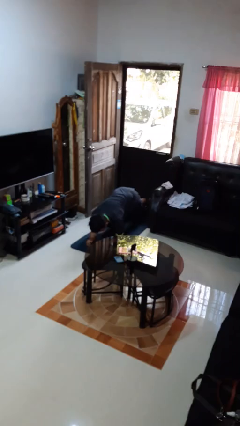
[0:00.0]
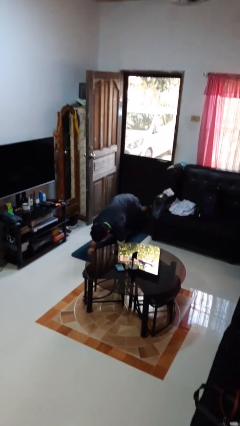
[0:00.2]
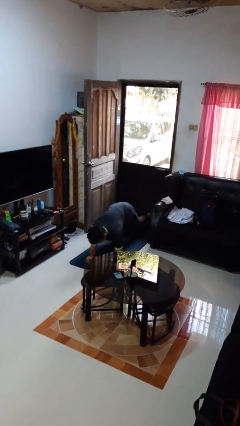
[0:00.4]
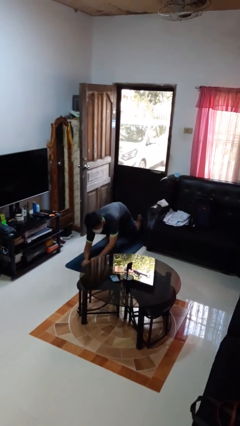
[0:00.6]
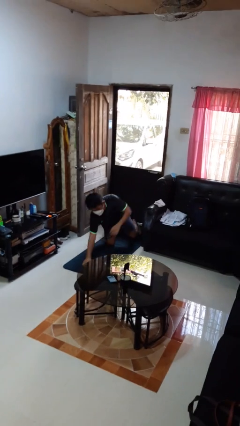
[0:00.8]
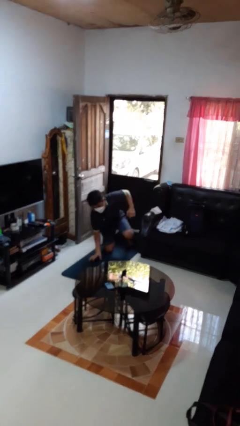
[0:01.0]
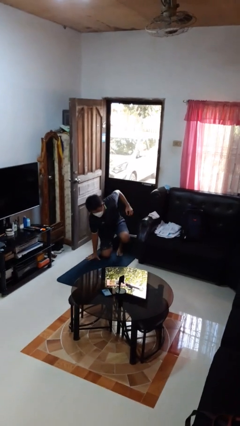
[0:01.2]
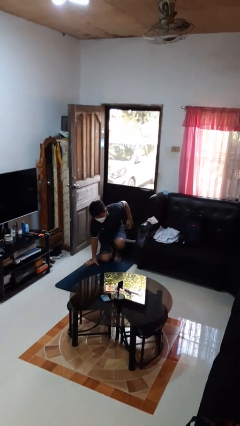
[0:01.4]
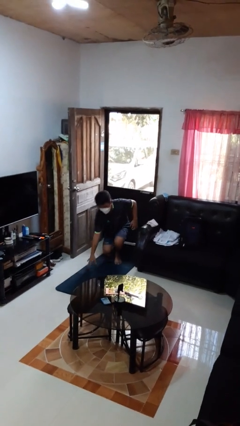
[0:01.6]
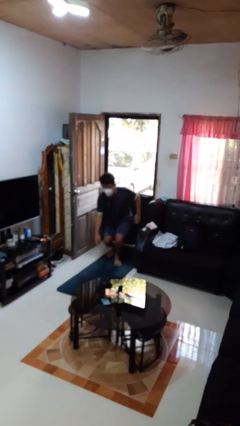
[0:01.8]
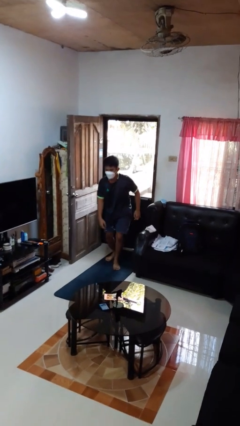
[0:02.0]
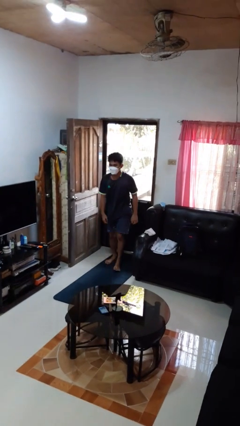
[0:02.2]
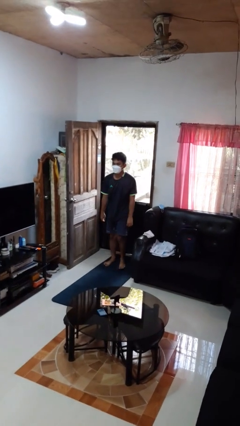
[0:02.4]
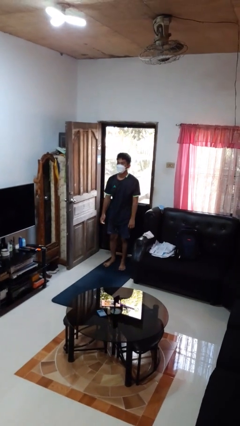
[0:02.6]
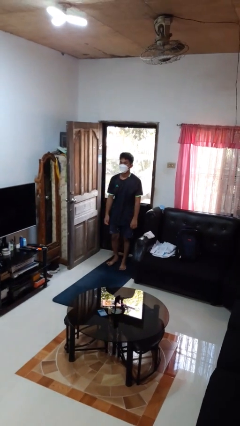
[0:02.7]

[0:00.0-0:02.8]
person stands up from floor

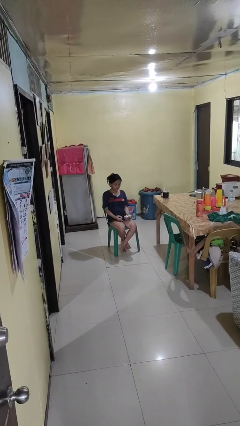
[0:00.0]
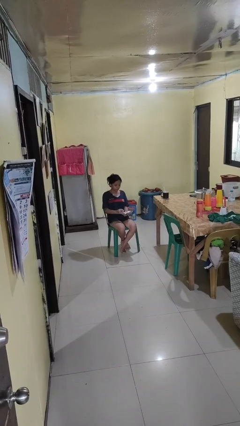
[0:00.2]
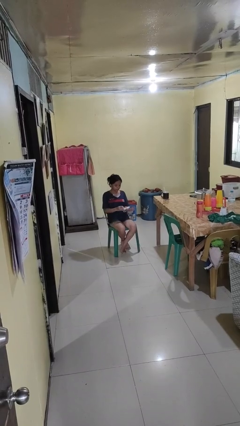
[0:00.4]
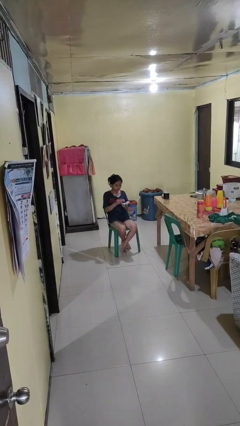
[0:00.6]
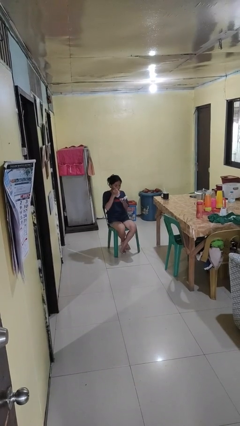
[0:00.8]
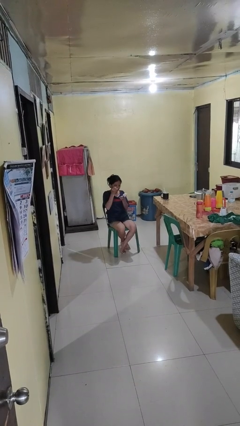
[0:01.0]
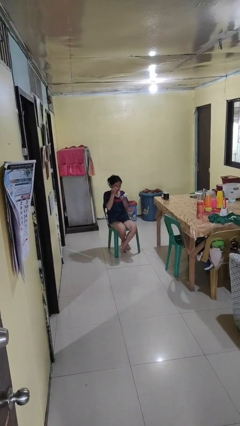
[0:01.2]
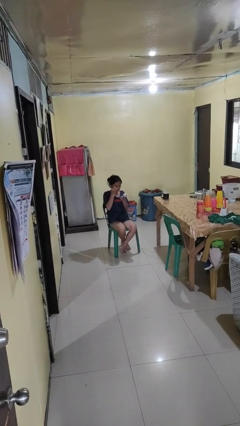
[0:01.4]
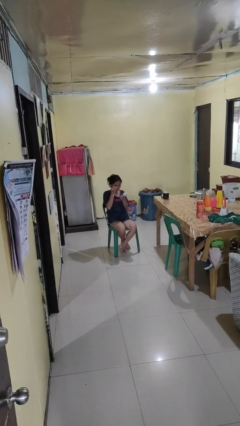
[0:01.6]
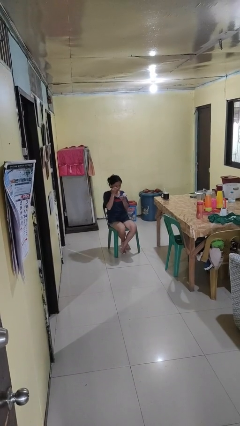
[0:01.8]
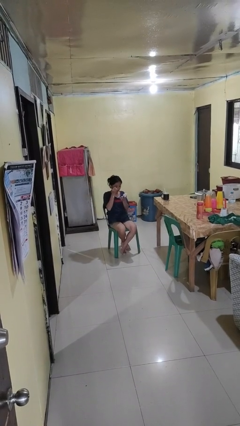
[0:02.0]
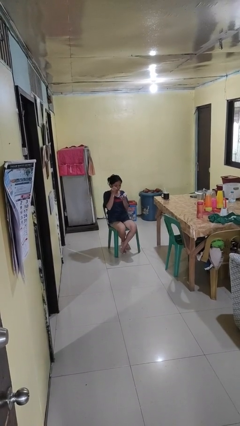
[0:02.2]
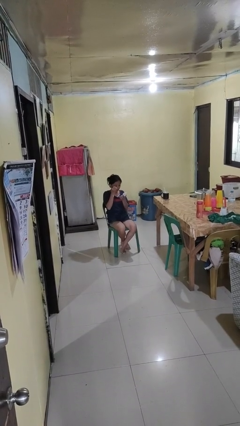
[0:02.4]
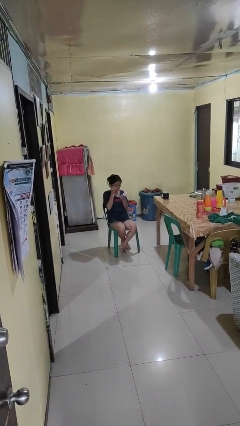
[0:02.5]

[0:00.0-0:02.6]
person applies eye makeup

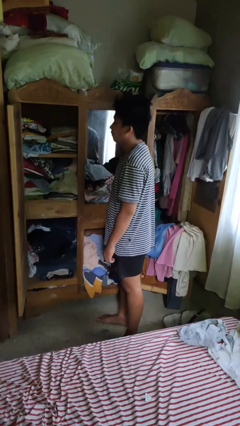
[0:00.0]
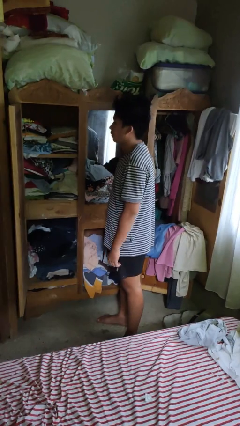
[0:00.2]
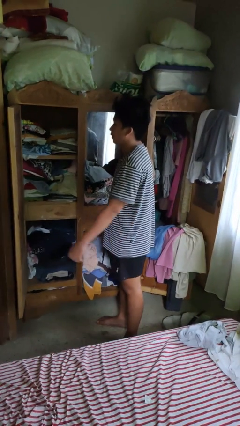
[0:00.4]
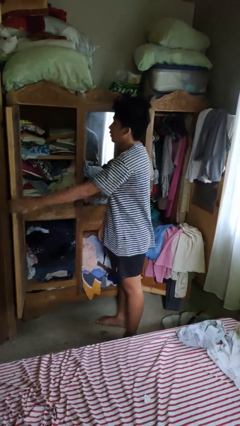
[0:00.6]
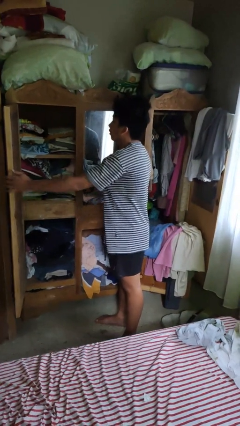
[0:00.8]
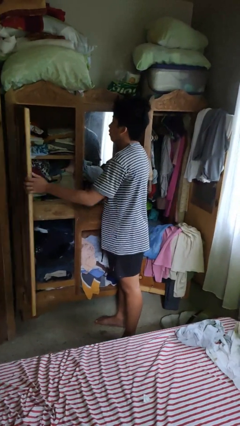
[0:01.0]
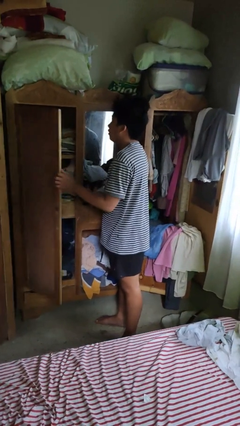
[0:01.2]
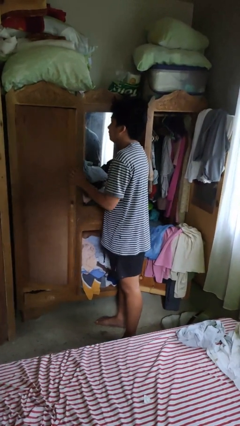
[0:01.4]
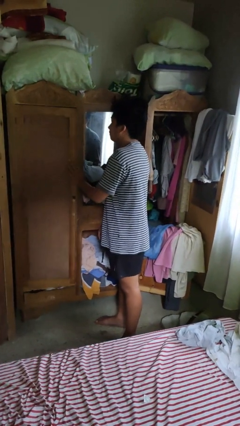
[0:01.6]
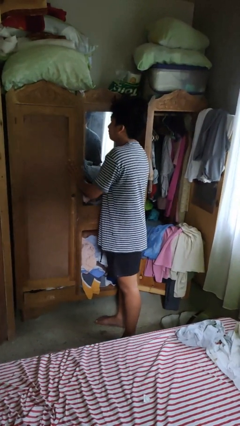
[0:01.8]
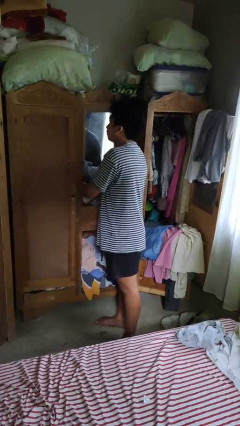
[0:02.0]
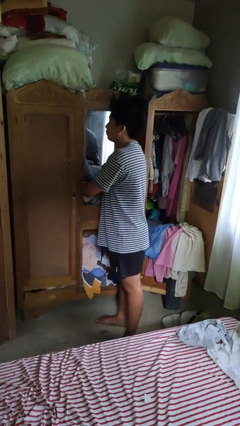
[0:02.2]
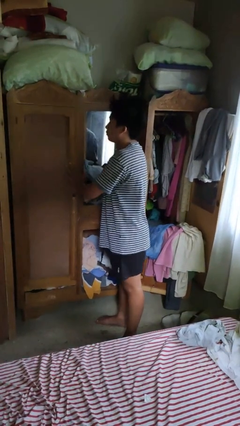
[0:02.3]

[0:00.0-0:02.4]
person closes dresser drawer

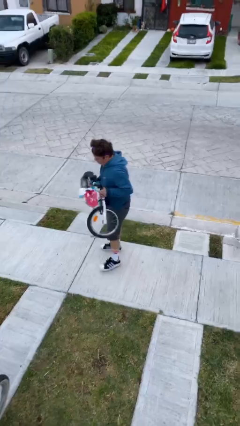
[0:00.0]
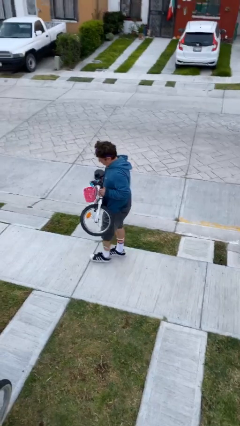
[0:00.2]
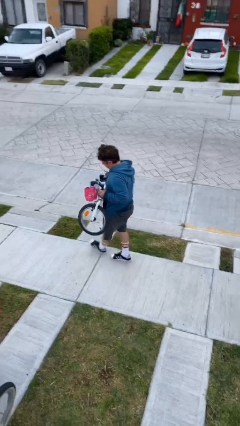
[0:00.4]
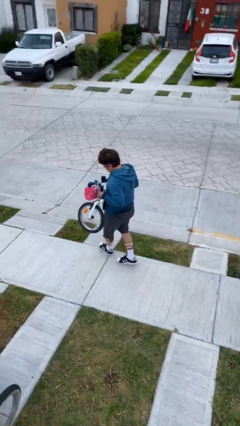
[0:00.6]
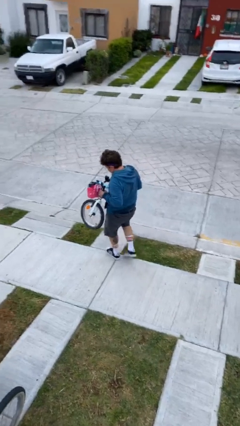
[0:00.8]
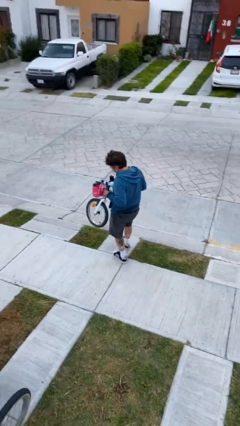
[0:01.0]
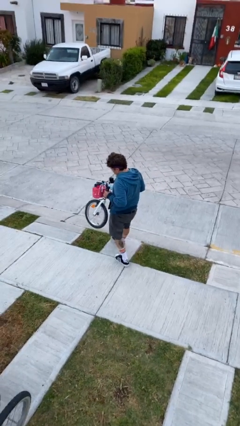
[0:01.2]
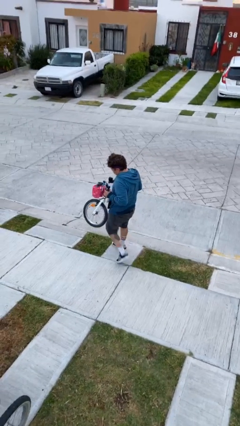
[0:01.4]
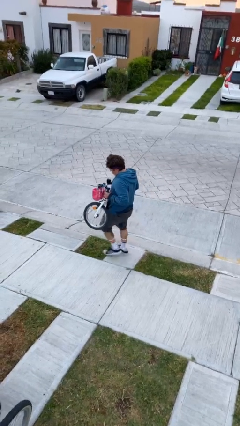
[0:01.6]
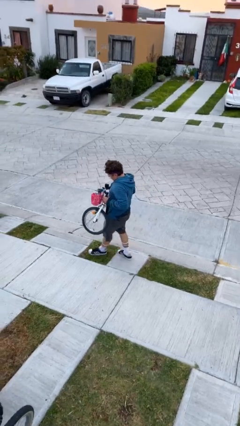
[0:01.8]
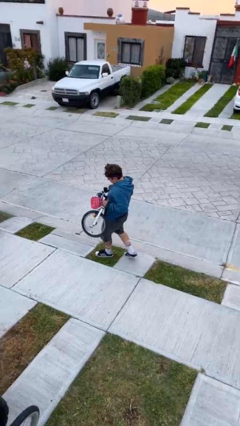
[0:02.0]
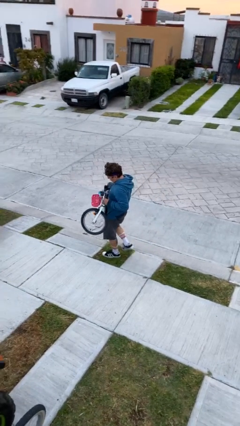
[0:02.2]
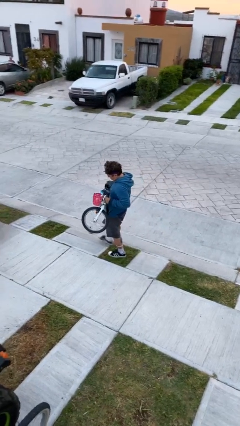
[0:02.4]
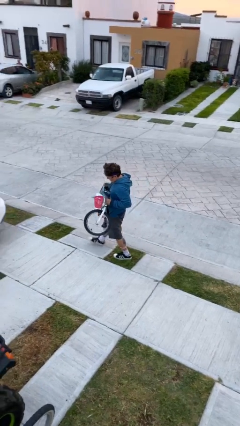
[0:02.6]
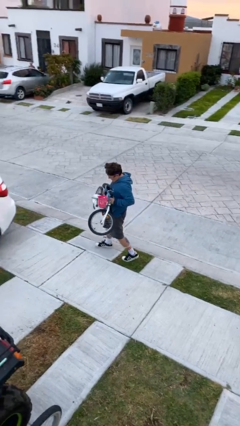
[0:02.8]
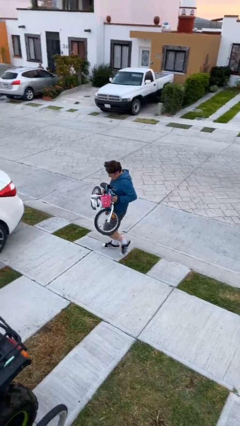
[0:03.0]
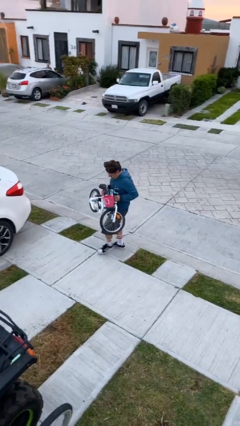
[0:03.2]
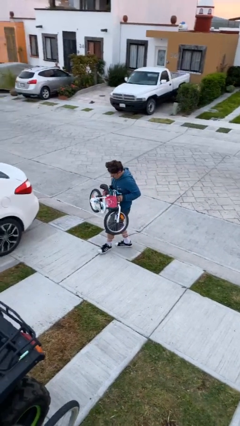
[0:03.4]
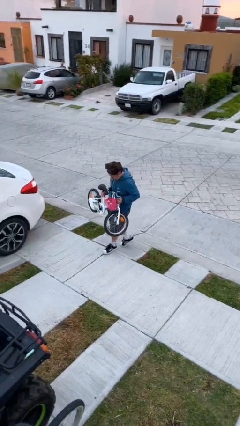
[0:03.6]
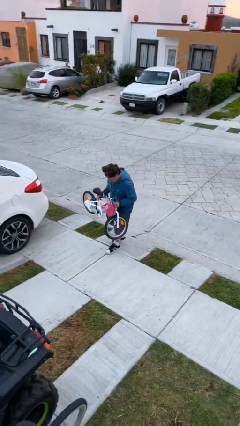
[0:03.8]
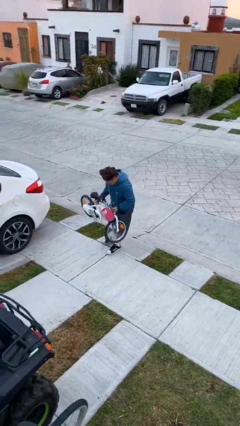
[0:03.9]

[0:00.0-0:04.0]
person carries heavy object

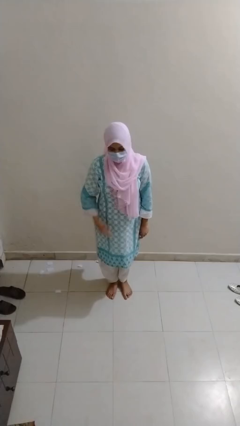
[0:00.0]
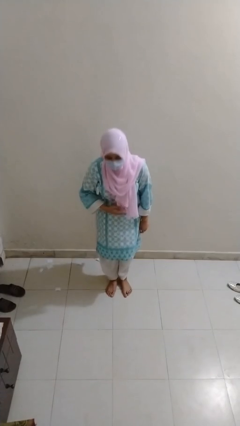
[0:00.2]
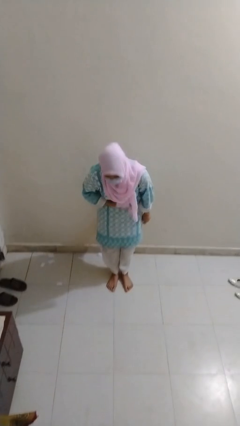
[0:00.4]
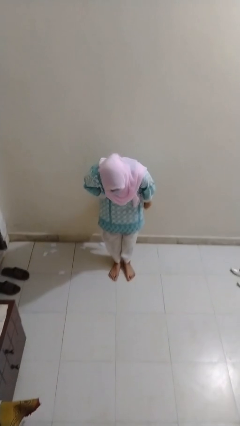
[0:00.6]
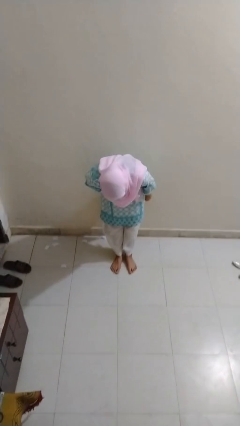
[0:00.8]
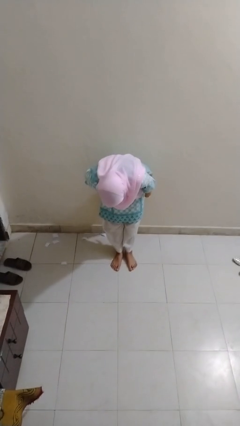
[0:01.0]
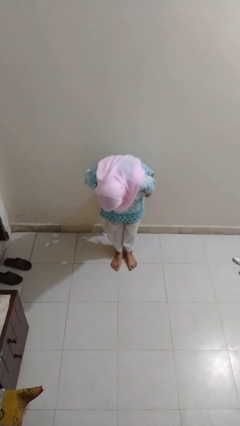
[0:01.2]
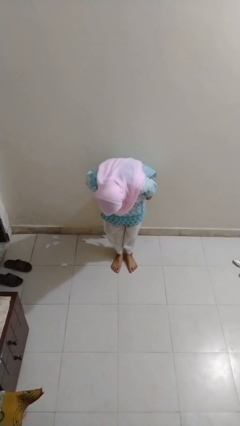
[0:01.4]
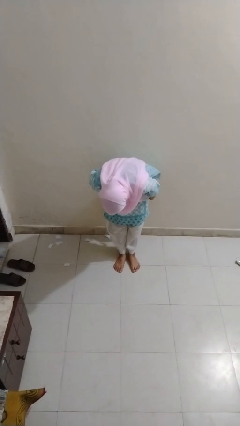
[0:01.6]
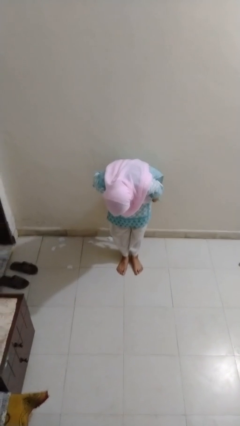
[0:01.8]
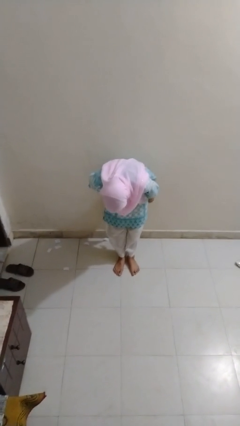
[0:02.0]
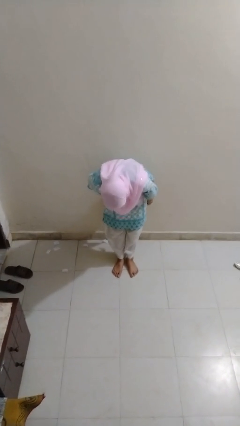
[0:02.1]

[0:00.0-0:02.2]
person bows

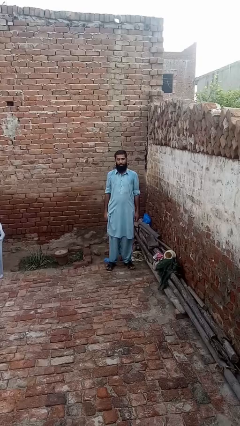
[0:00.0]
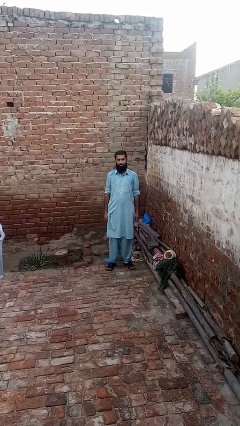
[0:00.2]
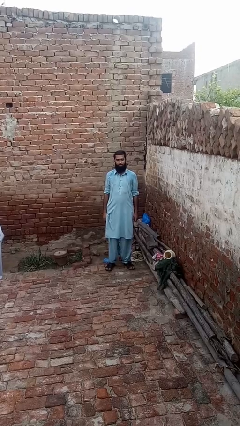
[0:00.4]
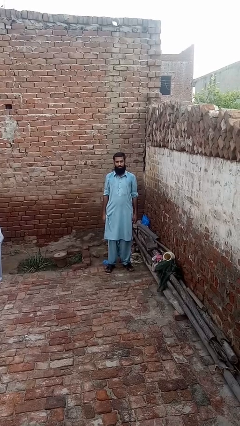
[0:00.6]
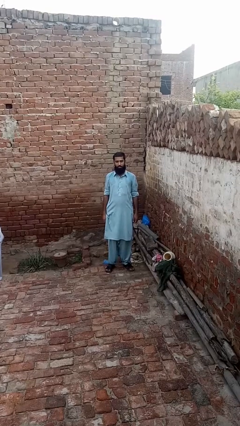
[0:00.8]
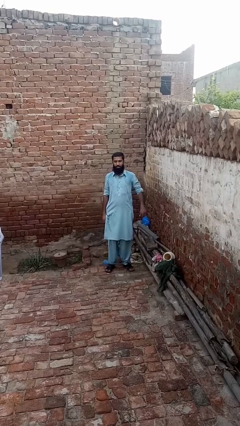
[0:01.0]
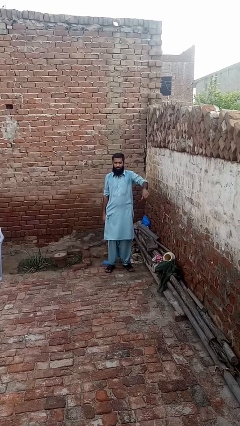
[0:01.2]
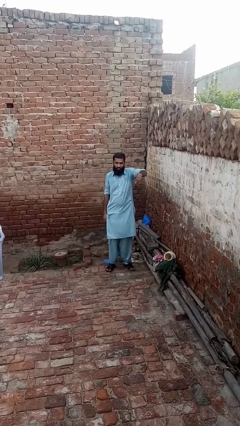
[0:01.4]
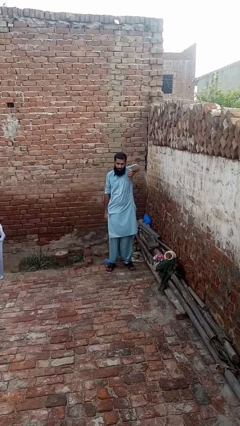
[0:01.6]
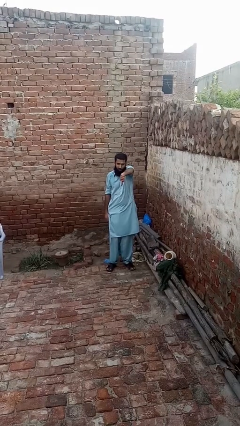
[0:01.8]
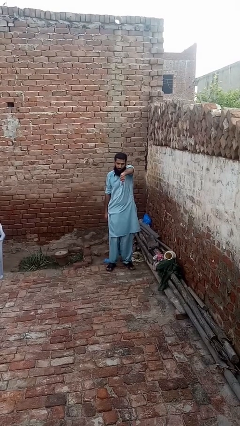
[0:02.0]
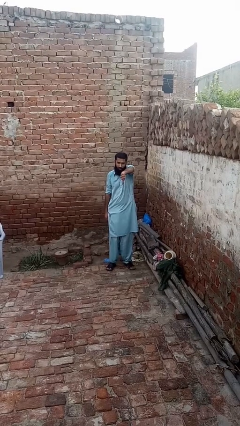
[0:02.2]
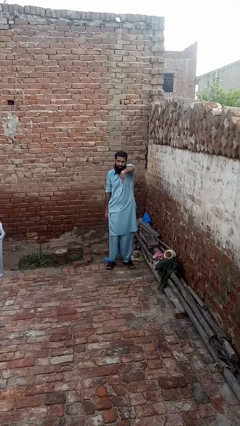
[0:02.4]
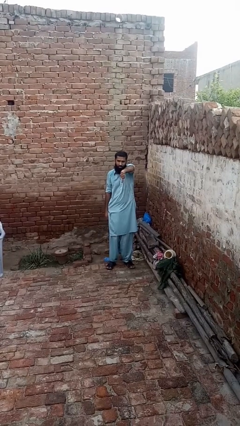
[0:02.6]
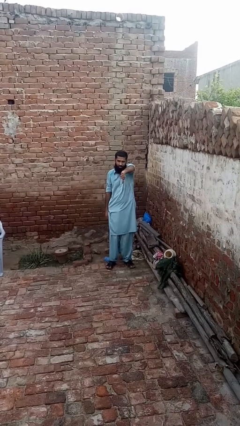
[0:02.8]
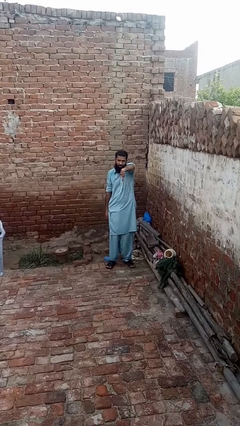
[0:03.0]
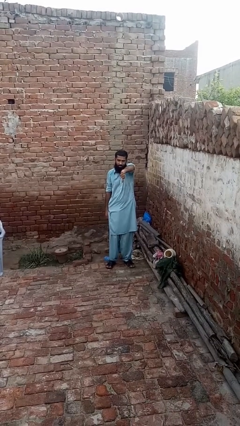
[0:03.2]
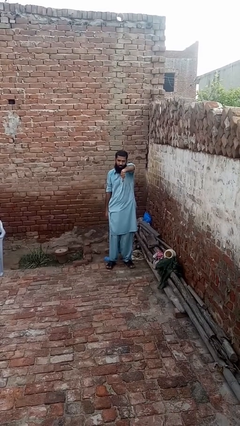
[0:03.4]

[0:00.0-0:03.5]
person gestures thumbs down

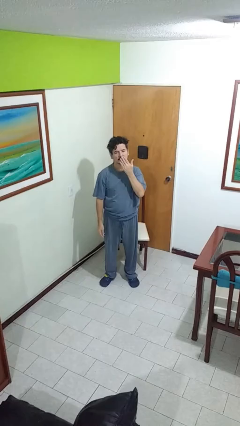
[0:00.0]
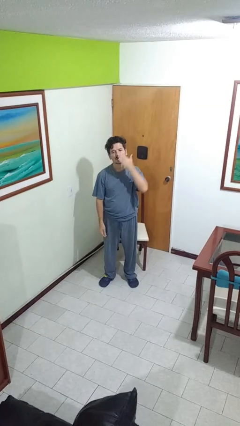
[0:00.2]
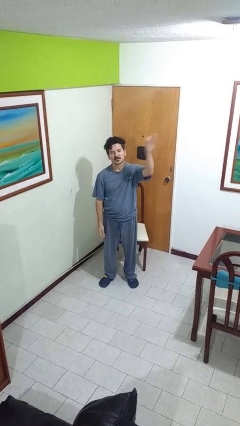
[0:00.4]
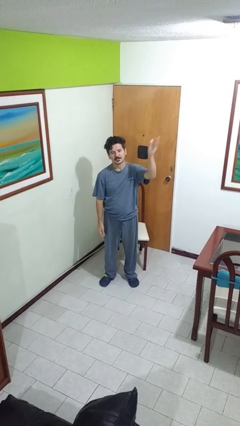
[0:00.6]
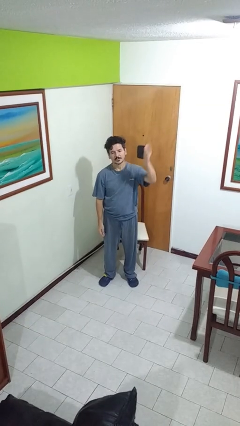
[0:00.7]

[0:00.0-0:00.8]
person gestures blow kiss
